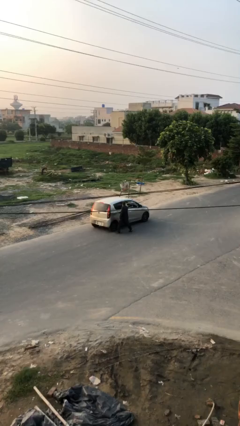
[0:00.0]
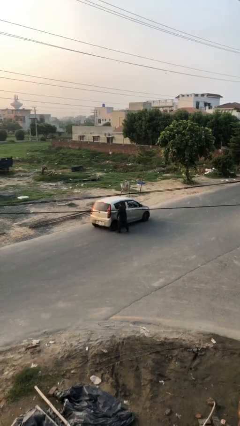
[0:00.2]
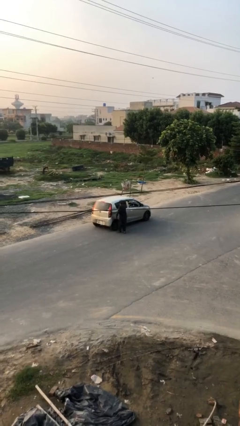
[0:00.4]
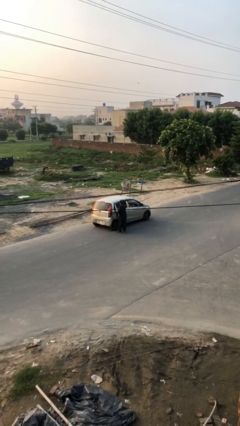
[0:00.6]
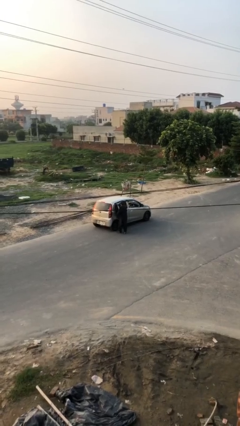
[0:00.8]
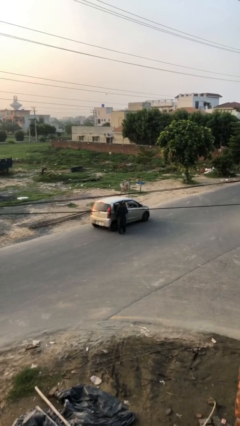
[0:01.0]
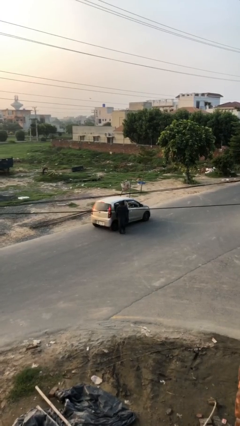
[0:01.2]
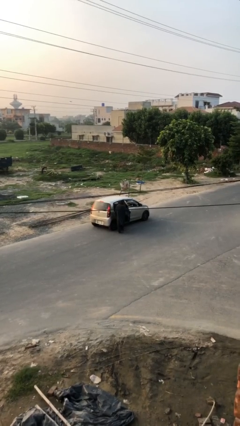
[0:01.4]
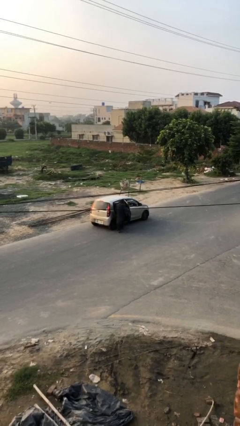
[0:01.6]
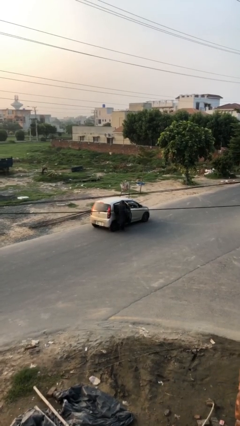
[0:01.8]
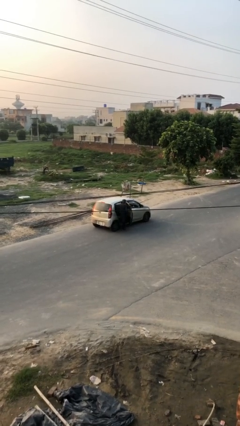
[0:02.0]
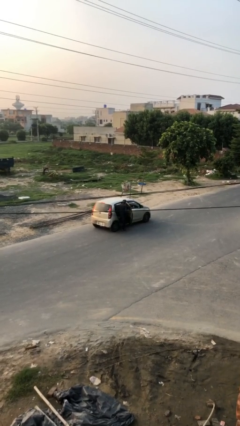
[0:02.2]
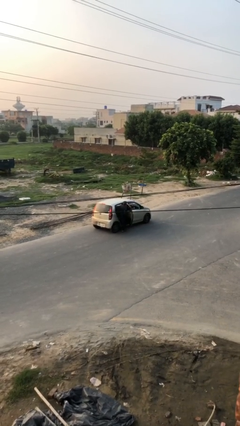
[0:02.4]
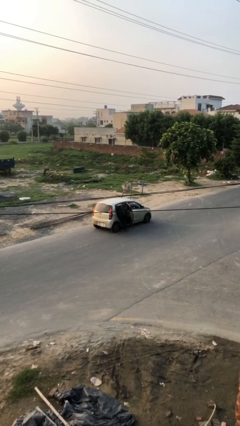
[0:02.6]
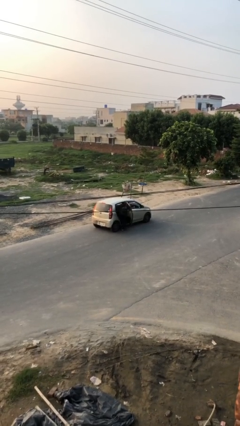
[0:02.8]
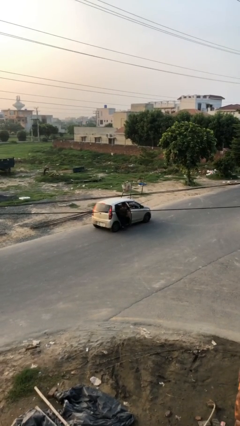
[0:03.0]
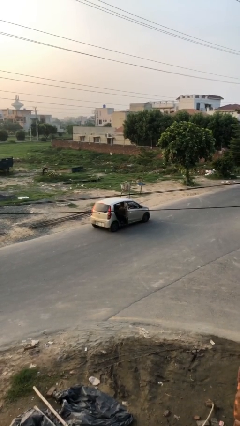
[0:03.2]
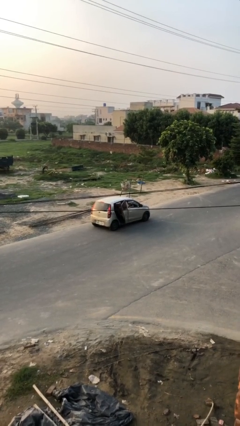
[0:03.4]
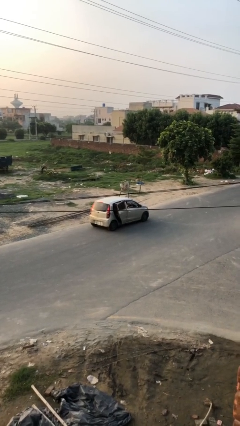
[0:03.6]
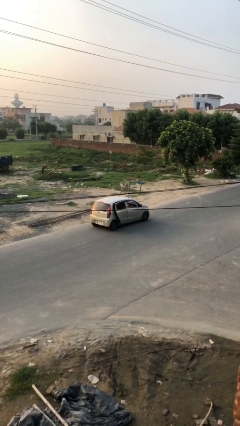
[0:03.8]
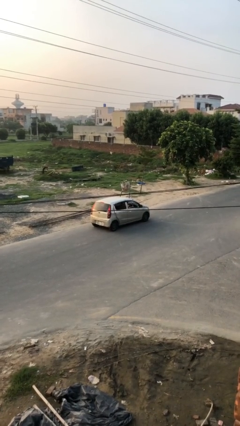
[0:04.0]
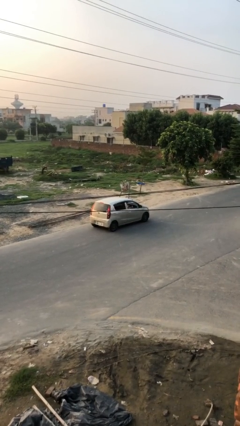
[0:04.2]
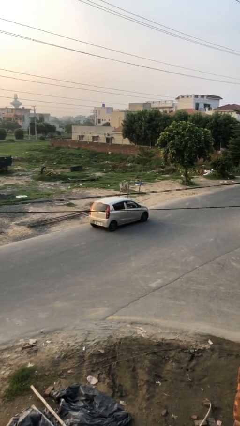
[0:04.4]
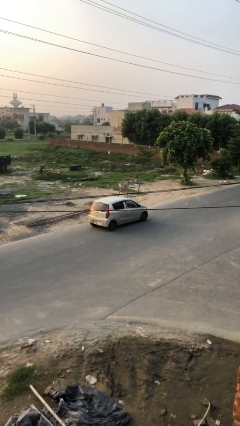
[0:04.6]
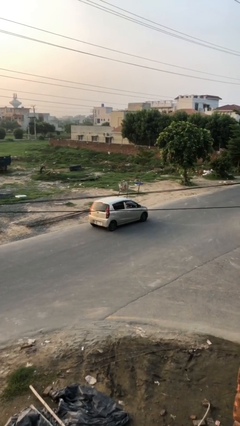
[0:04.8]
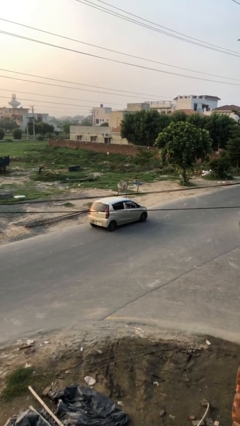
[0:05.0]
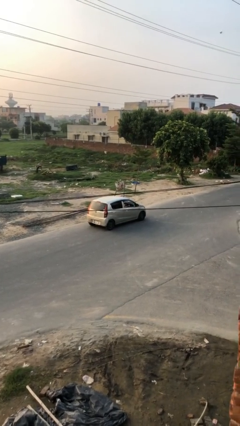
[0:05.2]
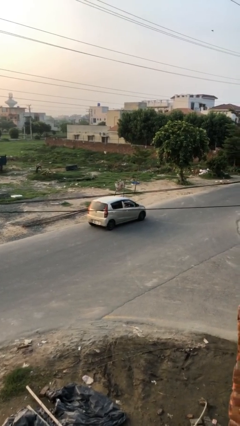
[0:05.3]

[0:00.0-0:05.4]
car picks up person

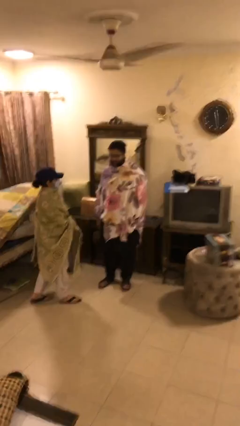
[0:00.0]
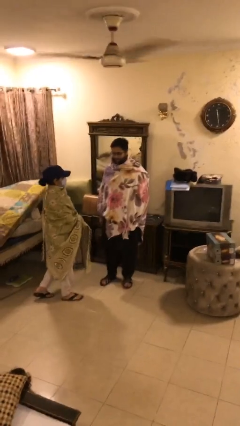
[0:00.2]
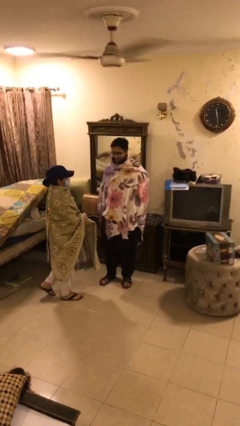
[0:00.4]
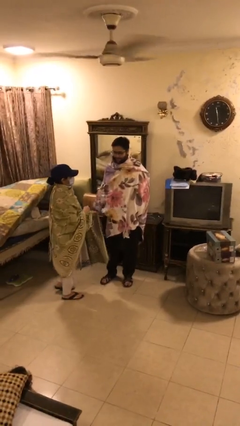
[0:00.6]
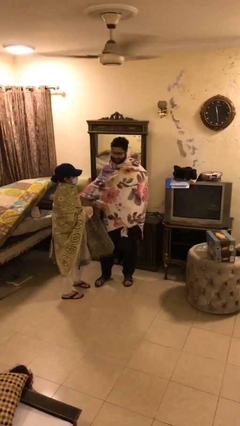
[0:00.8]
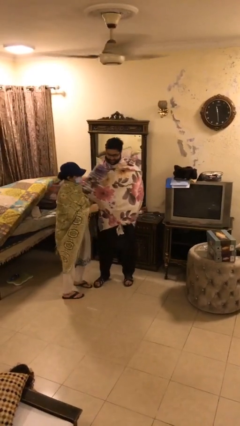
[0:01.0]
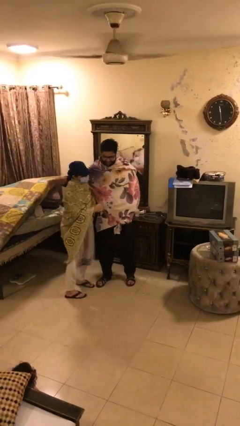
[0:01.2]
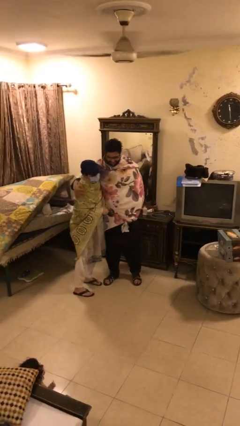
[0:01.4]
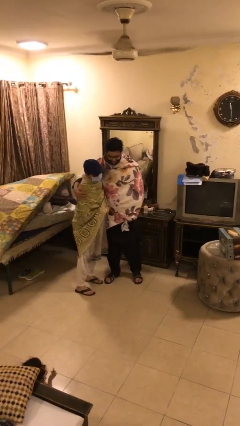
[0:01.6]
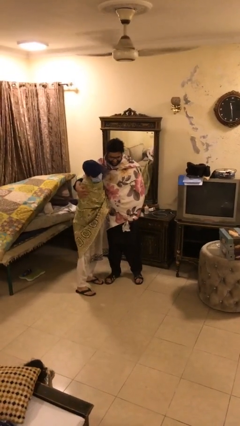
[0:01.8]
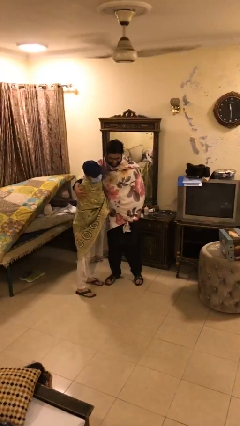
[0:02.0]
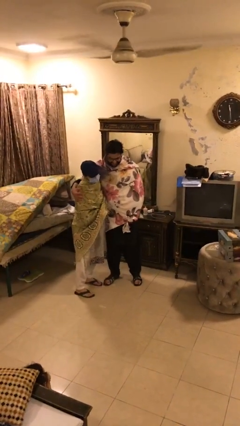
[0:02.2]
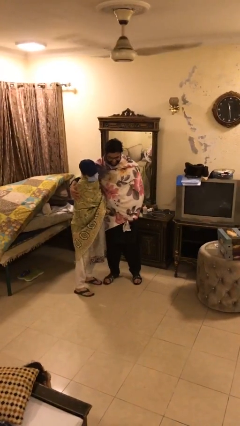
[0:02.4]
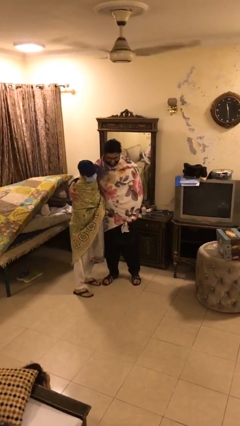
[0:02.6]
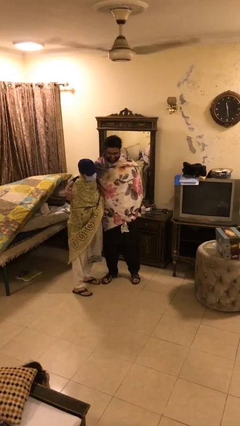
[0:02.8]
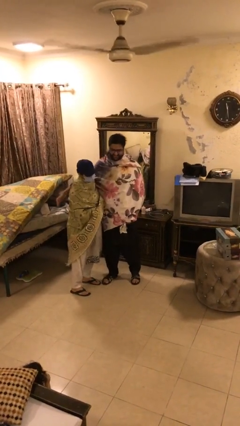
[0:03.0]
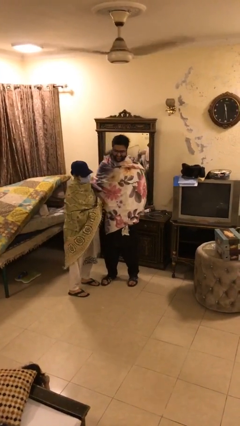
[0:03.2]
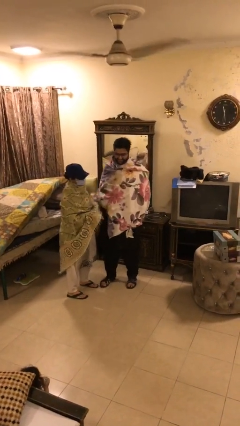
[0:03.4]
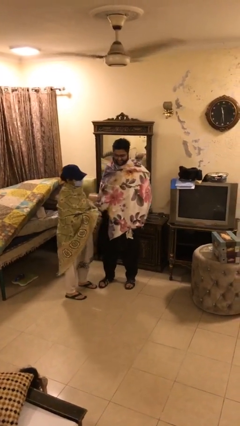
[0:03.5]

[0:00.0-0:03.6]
person embraces person

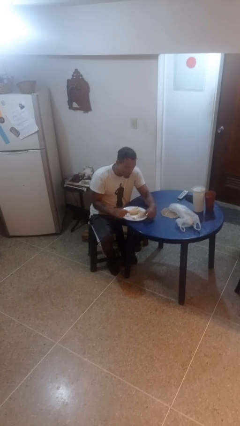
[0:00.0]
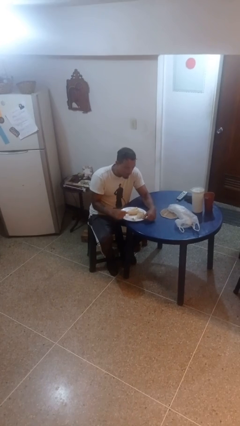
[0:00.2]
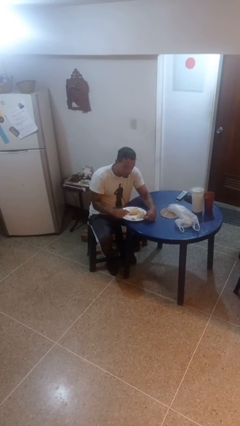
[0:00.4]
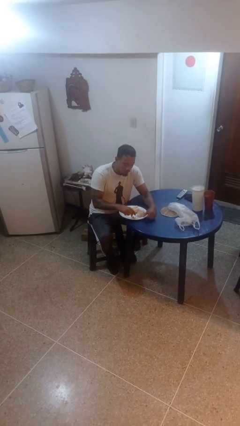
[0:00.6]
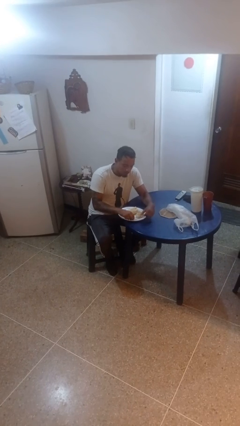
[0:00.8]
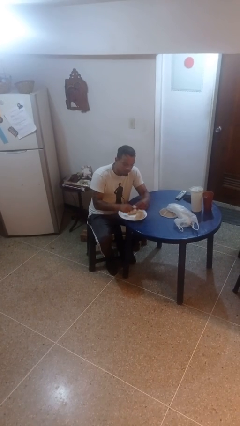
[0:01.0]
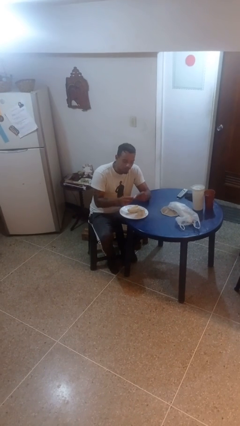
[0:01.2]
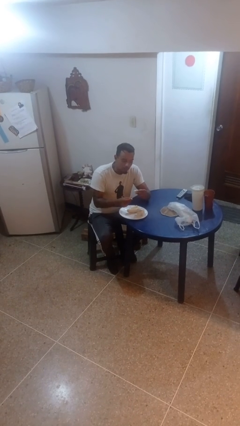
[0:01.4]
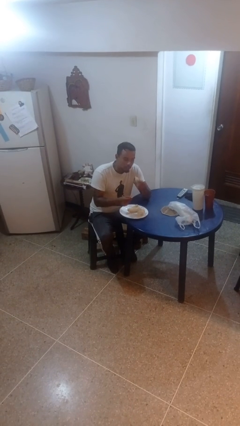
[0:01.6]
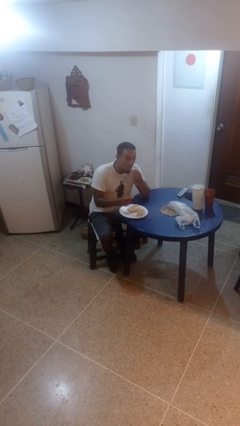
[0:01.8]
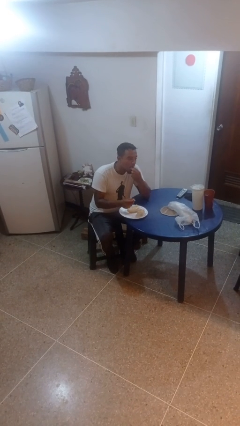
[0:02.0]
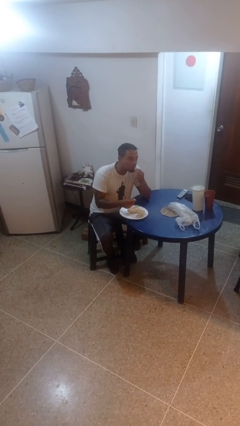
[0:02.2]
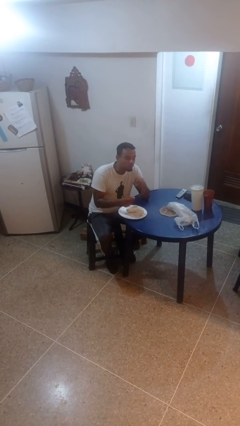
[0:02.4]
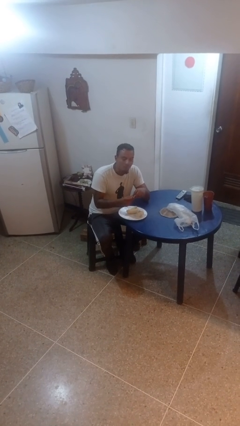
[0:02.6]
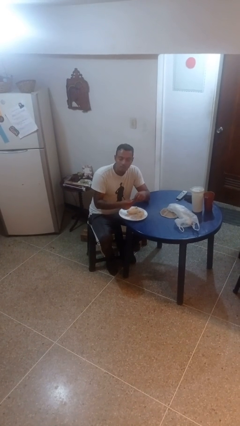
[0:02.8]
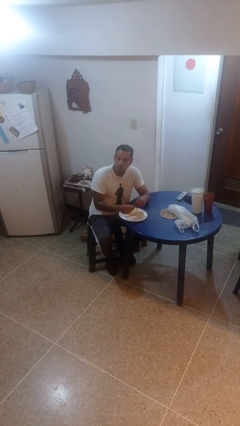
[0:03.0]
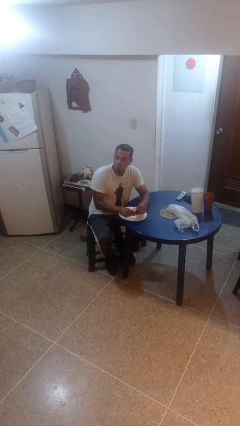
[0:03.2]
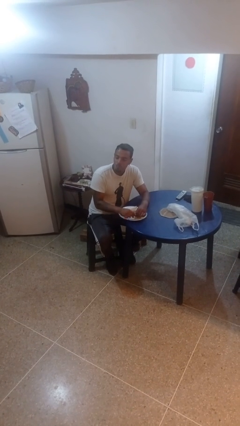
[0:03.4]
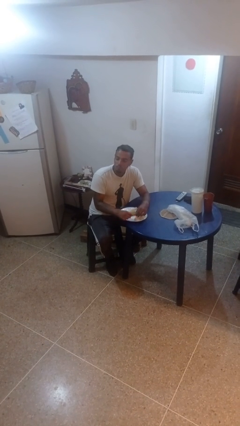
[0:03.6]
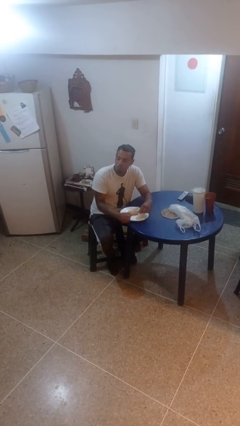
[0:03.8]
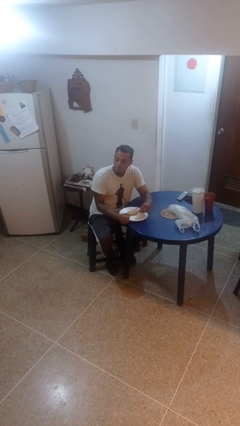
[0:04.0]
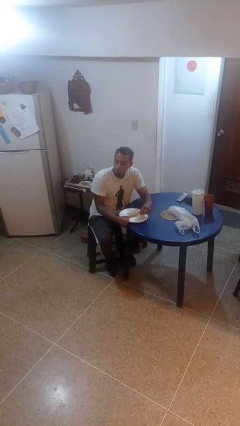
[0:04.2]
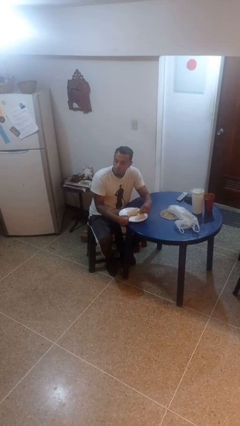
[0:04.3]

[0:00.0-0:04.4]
person eats with hands

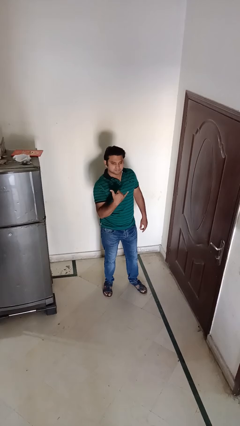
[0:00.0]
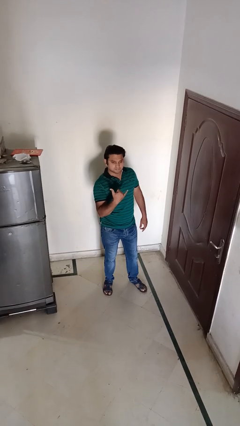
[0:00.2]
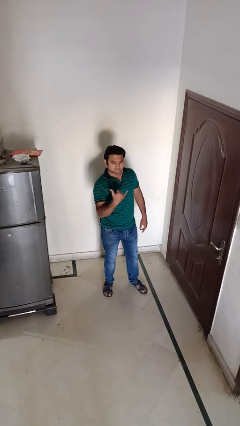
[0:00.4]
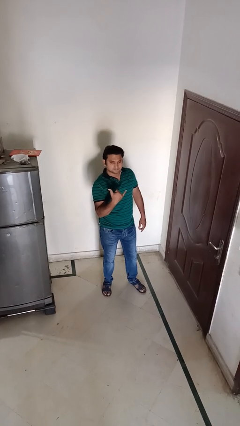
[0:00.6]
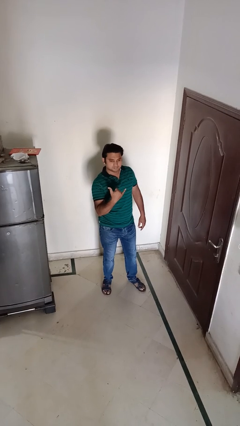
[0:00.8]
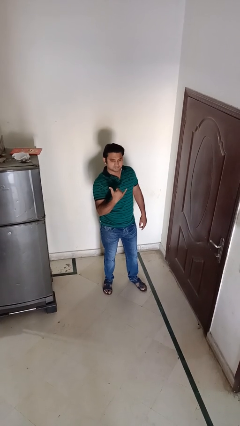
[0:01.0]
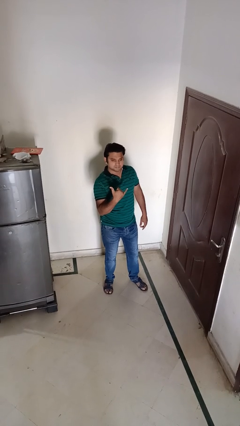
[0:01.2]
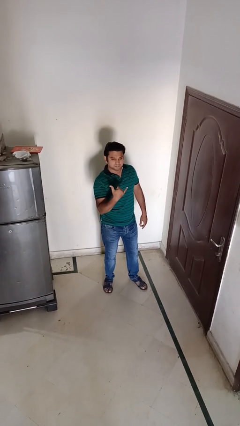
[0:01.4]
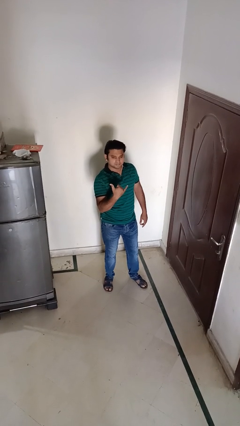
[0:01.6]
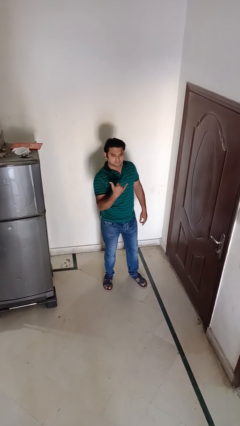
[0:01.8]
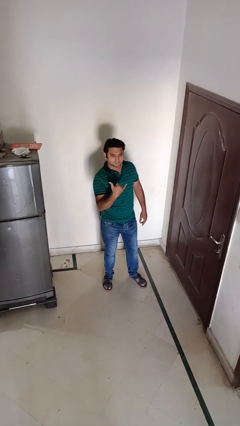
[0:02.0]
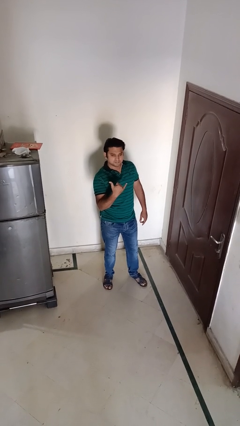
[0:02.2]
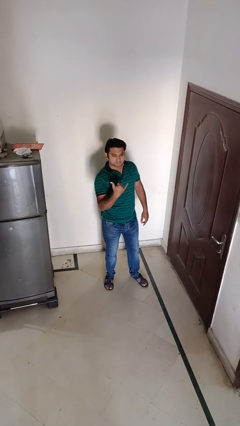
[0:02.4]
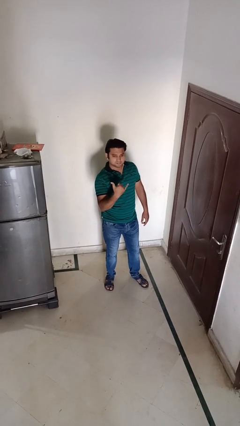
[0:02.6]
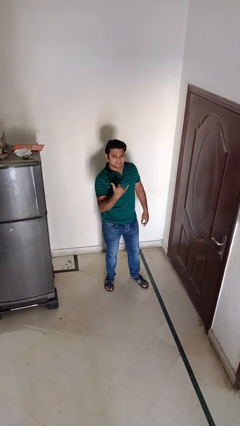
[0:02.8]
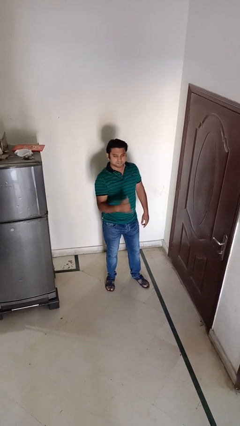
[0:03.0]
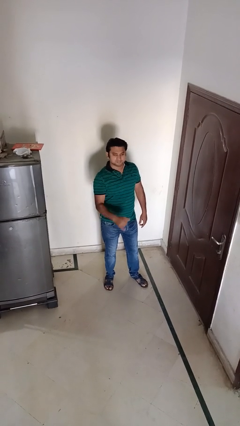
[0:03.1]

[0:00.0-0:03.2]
person gestures hang loose

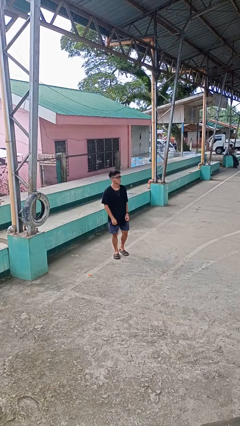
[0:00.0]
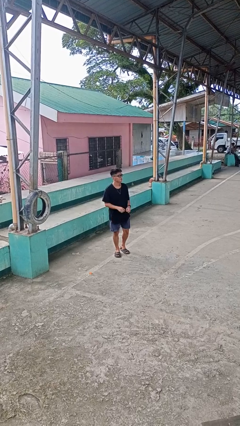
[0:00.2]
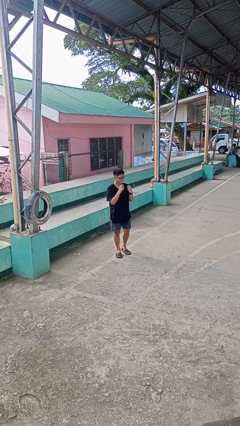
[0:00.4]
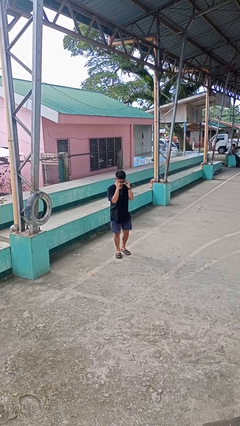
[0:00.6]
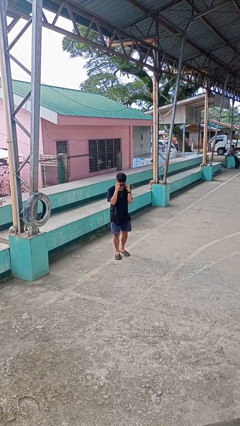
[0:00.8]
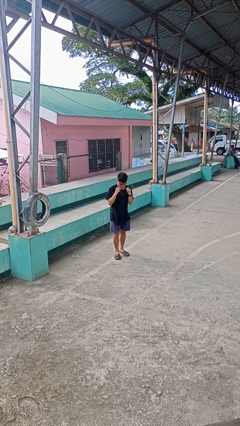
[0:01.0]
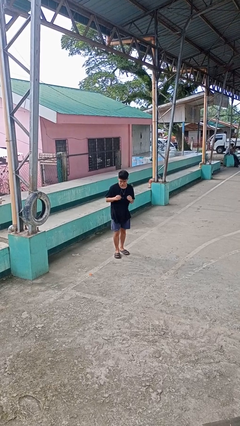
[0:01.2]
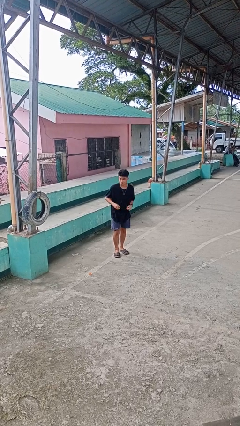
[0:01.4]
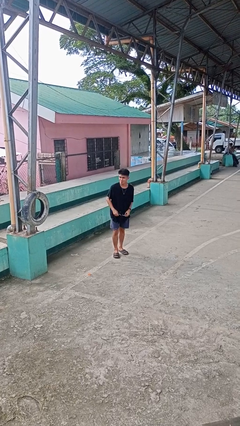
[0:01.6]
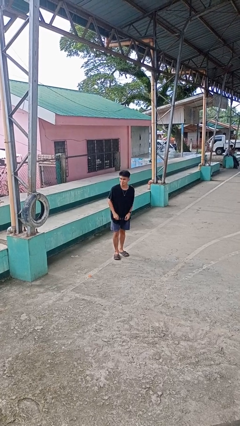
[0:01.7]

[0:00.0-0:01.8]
person takes off sunglasses
